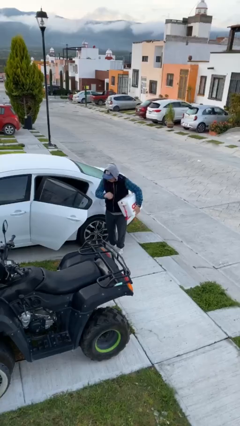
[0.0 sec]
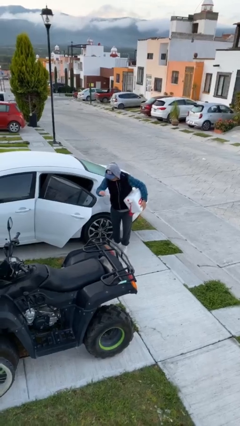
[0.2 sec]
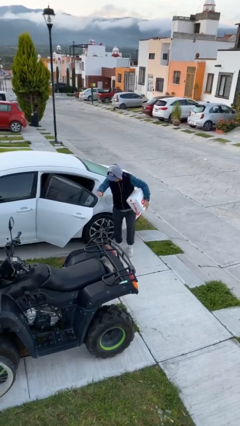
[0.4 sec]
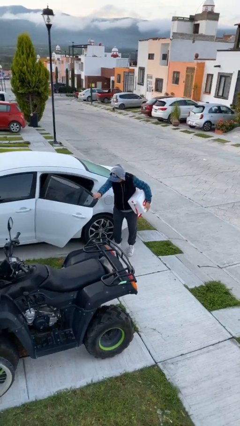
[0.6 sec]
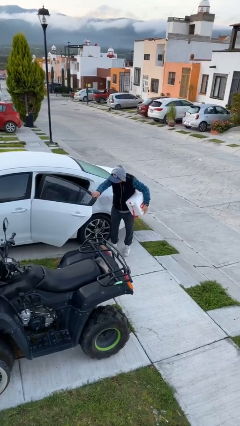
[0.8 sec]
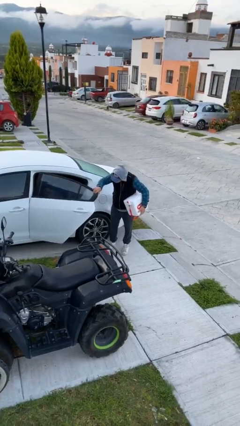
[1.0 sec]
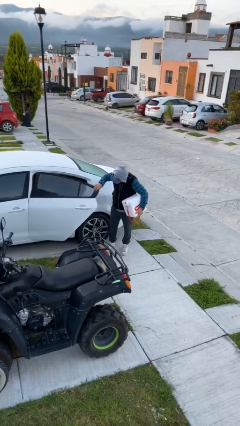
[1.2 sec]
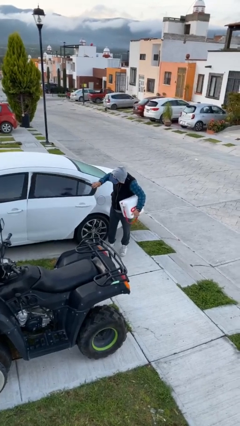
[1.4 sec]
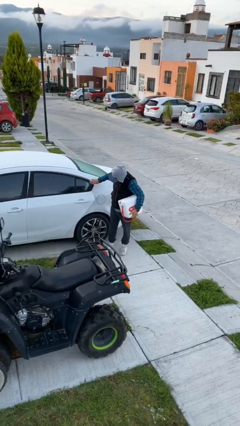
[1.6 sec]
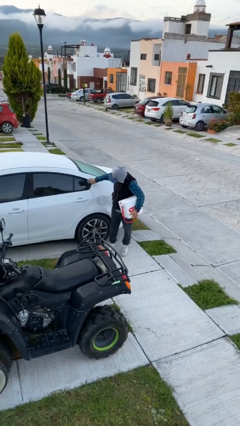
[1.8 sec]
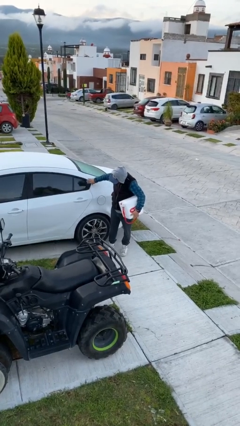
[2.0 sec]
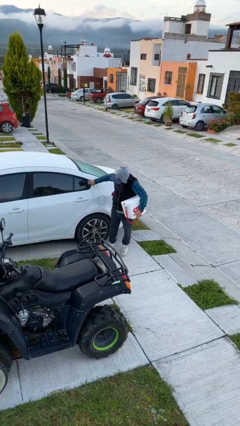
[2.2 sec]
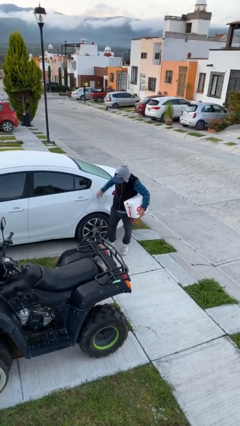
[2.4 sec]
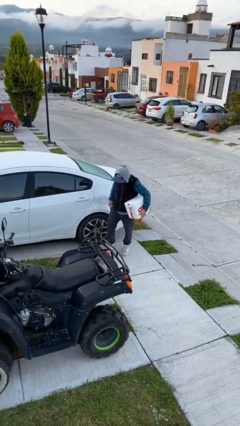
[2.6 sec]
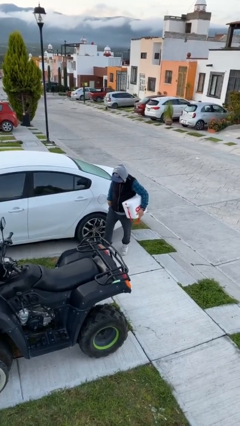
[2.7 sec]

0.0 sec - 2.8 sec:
person closes car door

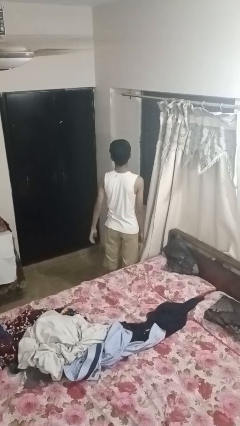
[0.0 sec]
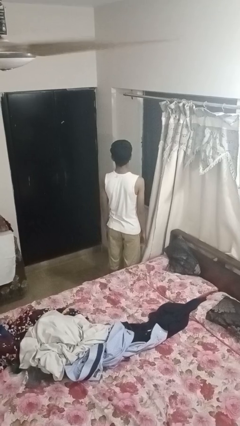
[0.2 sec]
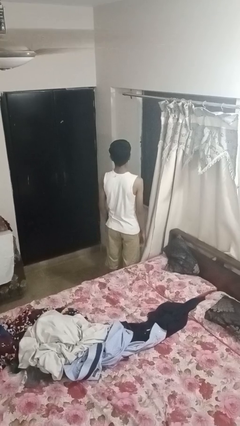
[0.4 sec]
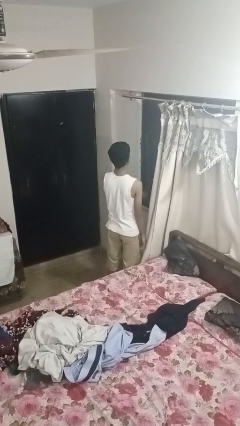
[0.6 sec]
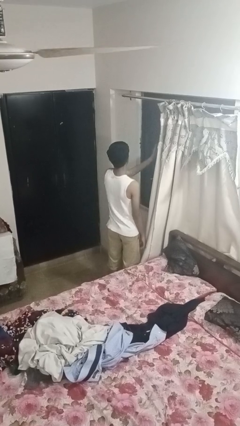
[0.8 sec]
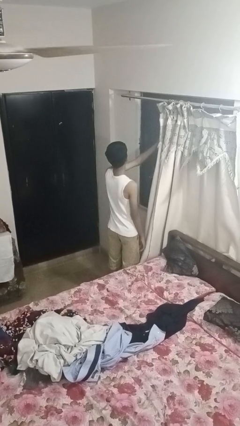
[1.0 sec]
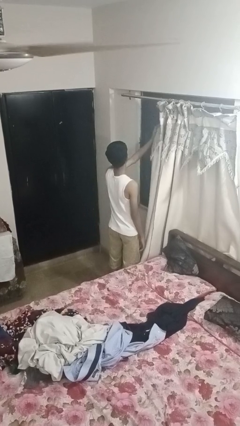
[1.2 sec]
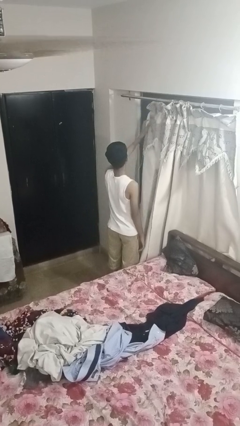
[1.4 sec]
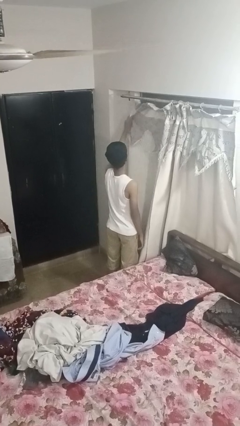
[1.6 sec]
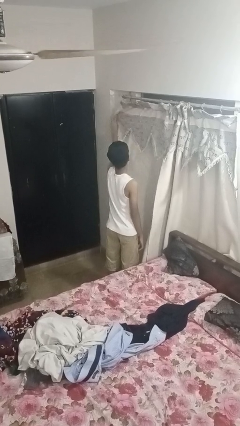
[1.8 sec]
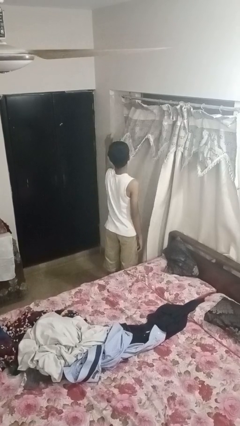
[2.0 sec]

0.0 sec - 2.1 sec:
person closes curtains

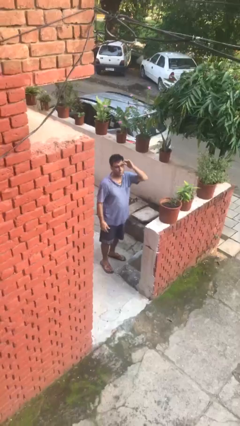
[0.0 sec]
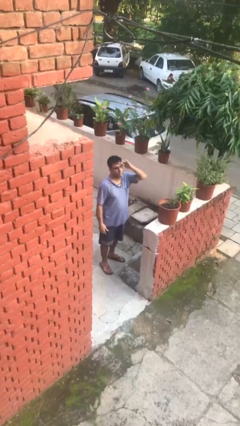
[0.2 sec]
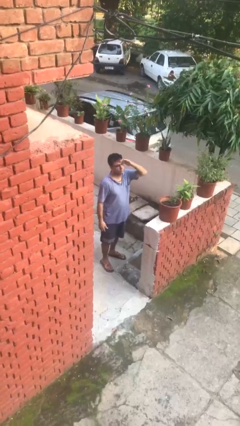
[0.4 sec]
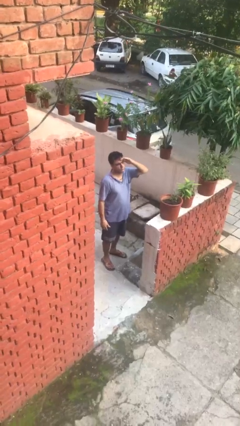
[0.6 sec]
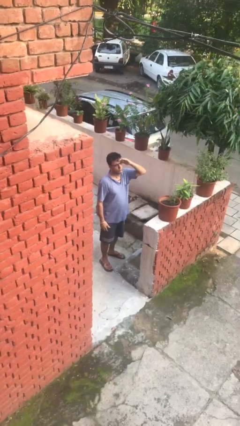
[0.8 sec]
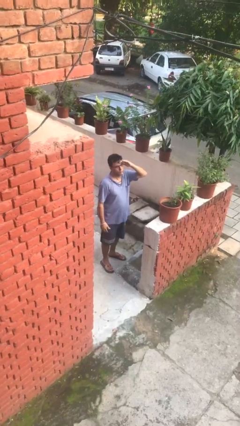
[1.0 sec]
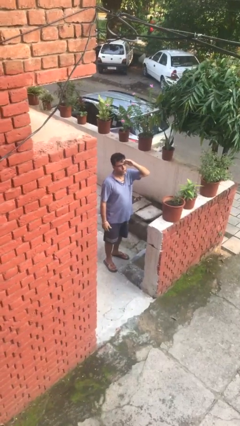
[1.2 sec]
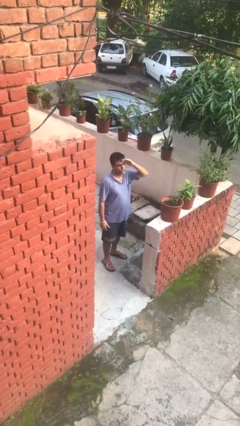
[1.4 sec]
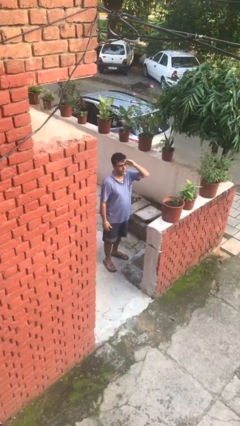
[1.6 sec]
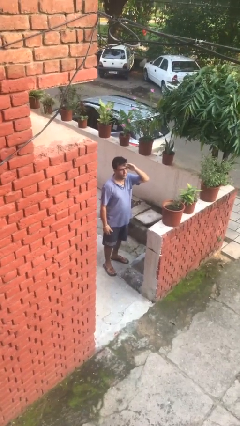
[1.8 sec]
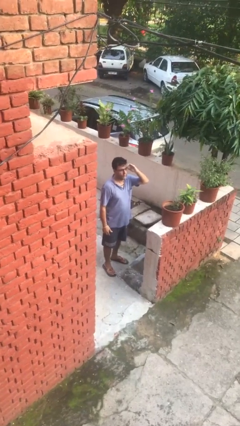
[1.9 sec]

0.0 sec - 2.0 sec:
person shades eyes

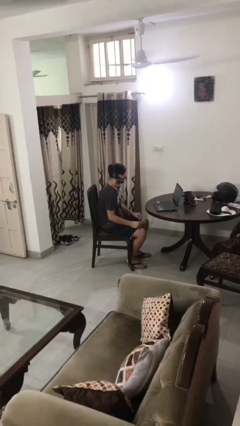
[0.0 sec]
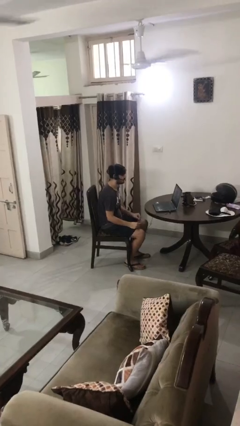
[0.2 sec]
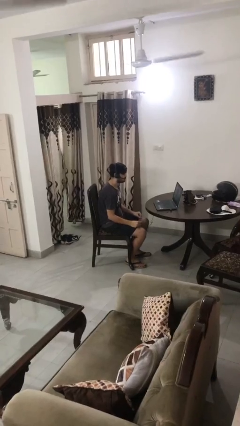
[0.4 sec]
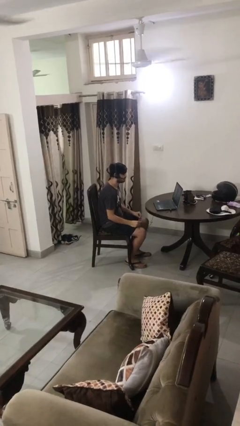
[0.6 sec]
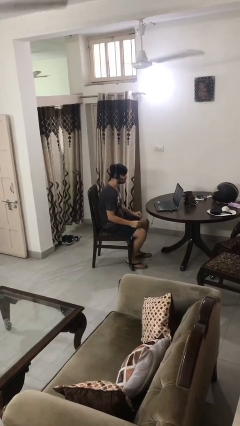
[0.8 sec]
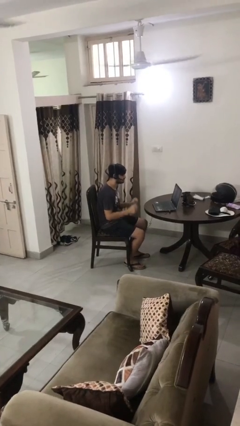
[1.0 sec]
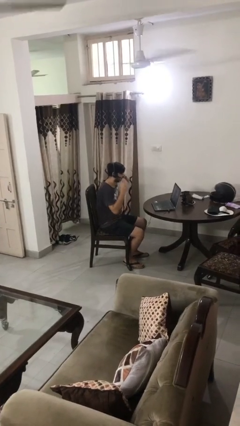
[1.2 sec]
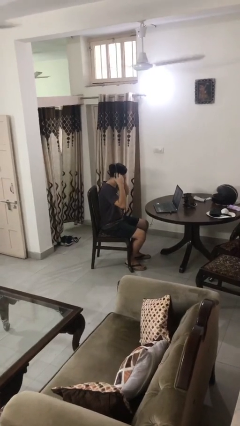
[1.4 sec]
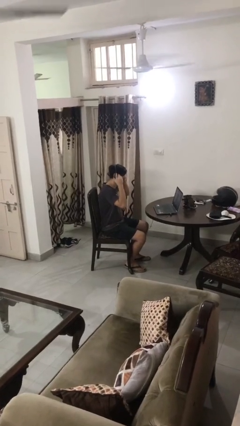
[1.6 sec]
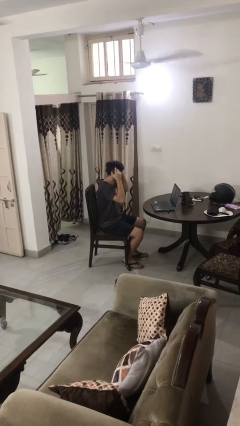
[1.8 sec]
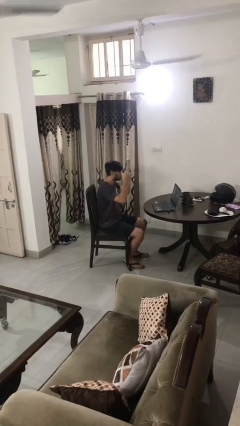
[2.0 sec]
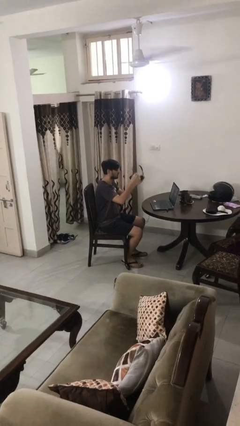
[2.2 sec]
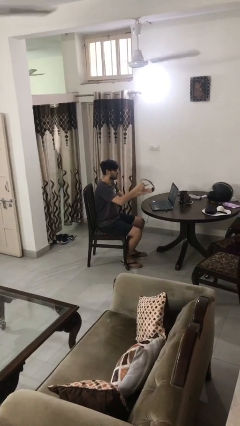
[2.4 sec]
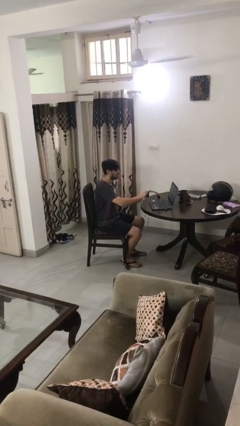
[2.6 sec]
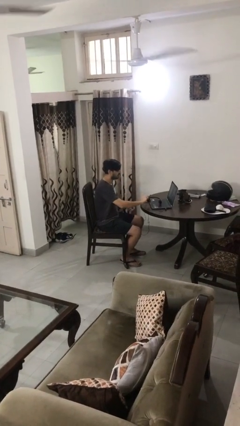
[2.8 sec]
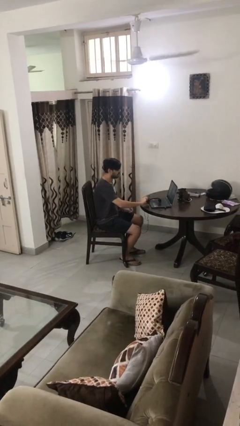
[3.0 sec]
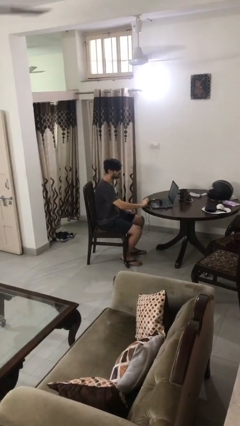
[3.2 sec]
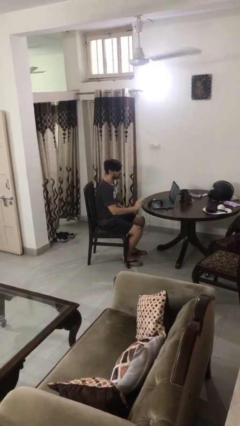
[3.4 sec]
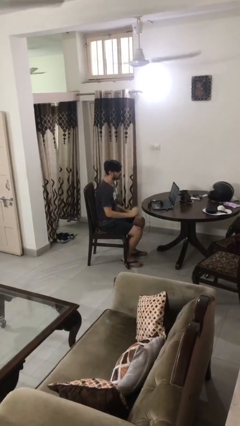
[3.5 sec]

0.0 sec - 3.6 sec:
person takes off headphones

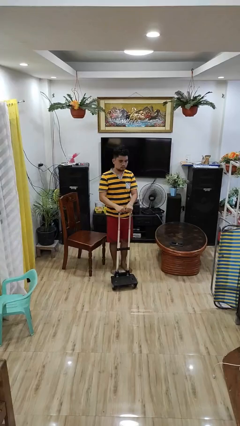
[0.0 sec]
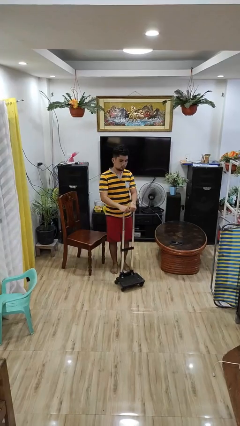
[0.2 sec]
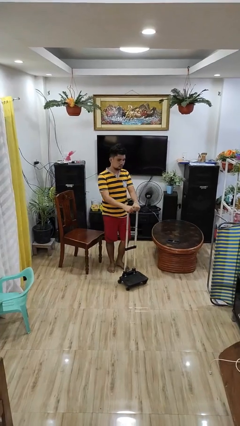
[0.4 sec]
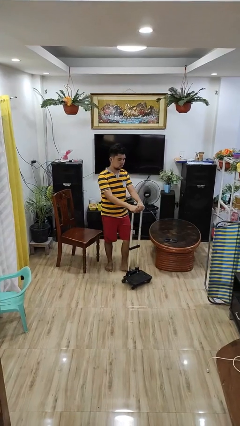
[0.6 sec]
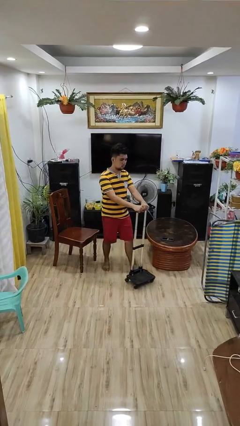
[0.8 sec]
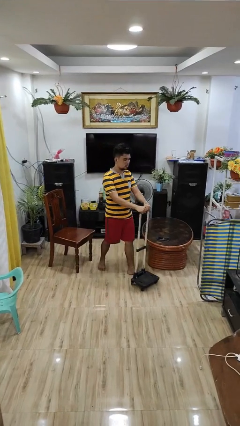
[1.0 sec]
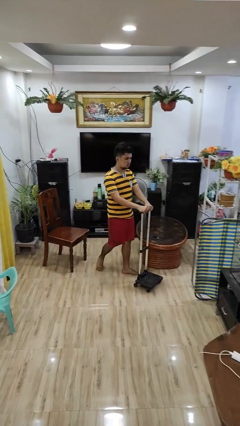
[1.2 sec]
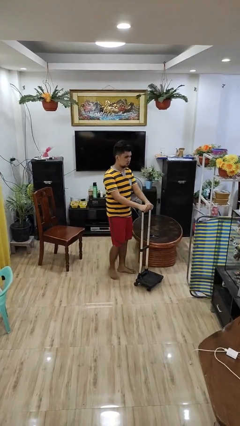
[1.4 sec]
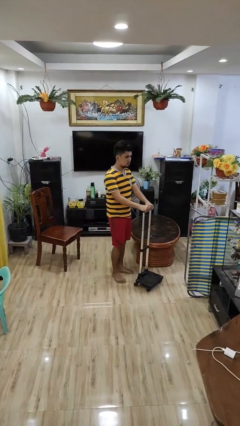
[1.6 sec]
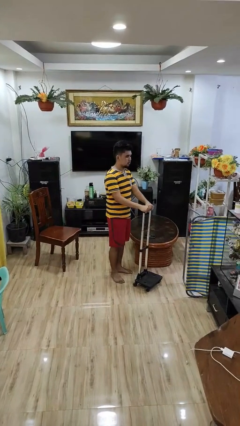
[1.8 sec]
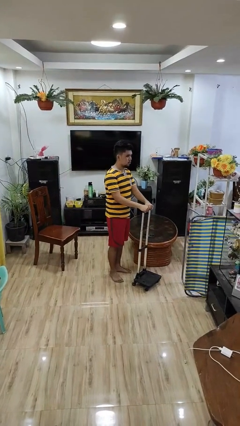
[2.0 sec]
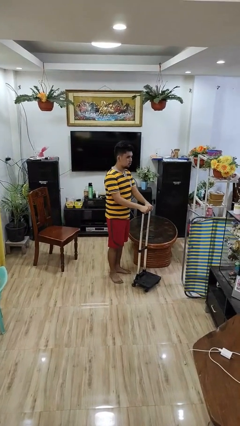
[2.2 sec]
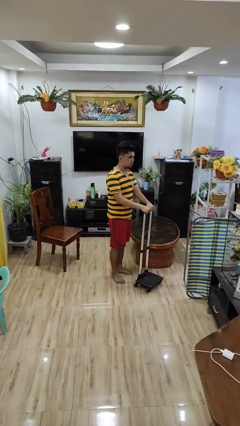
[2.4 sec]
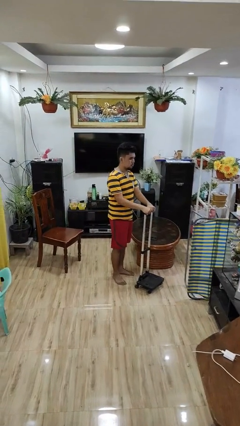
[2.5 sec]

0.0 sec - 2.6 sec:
person pushes wheeled cart

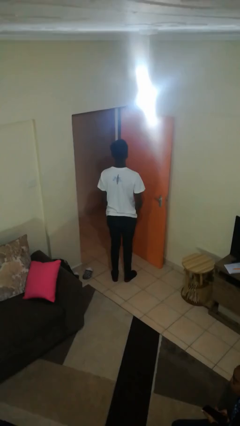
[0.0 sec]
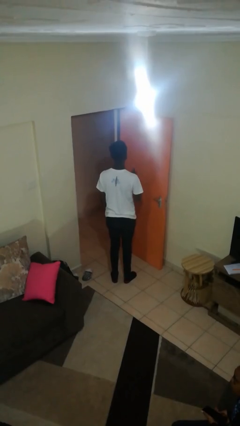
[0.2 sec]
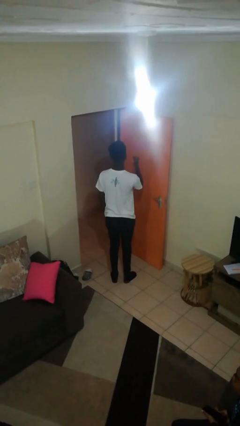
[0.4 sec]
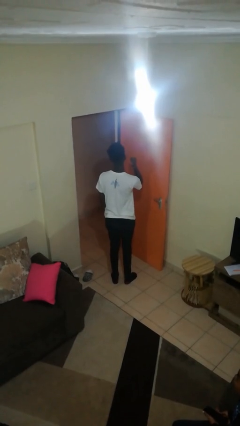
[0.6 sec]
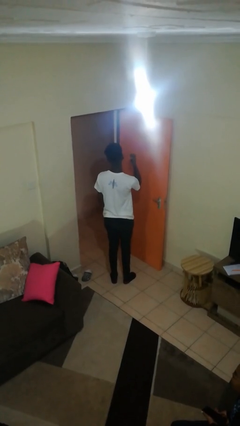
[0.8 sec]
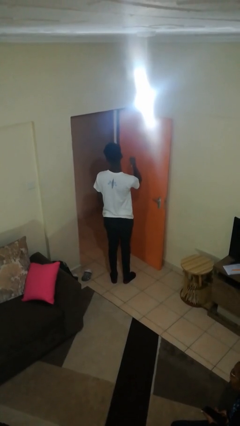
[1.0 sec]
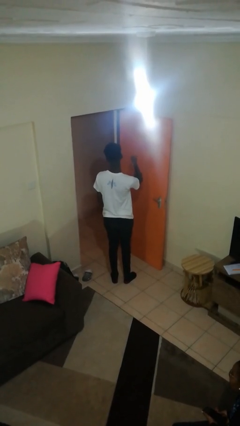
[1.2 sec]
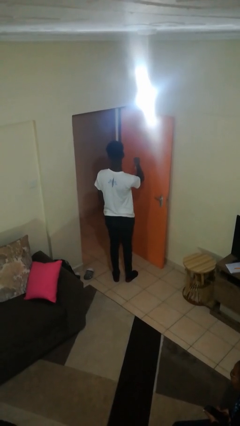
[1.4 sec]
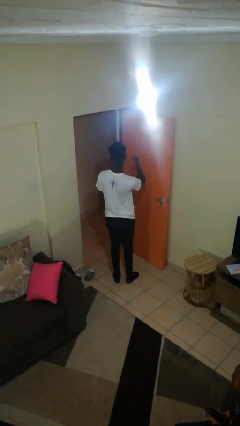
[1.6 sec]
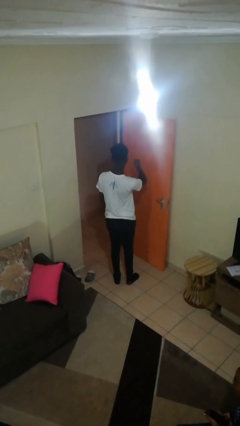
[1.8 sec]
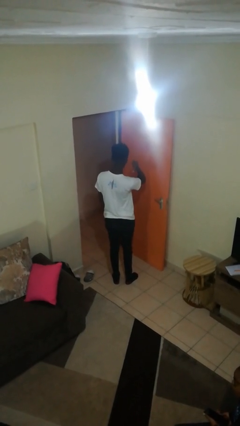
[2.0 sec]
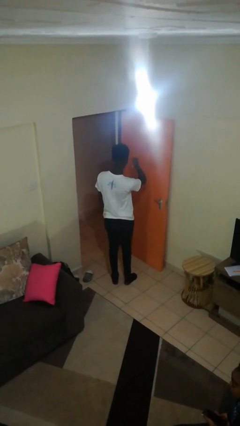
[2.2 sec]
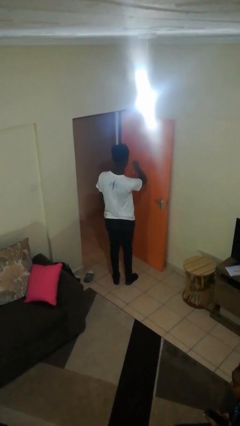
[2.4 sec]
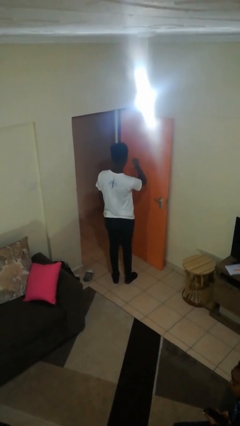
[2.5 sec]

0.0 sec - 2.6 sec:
person gestures behind me

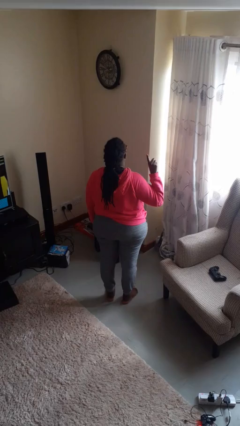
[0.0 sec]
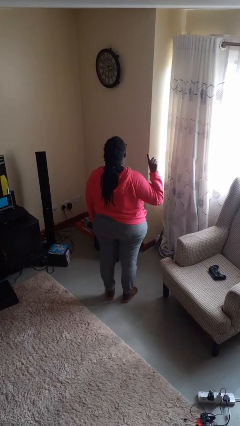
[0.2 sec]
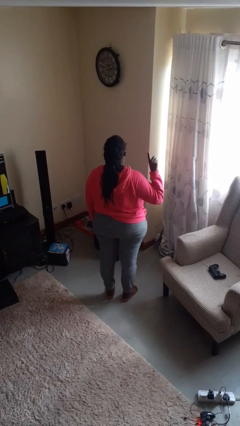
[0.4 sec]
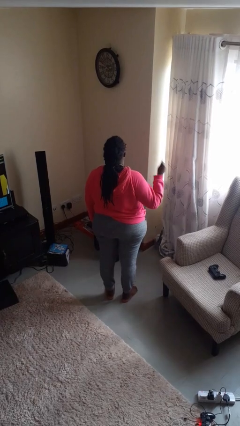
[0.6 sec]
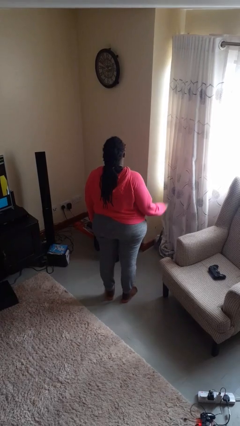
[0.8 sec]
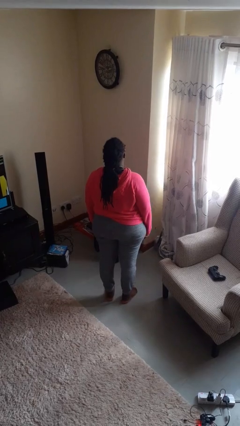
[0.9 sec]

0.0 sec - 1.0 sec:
person gestures number one

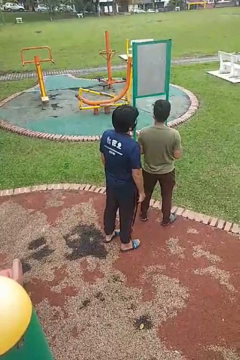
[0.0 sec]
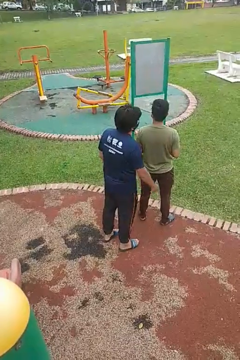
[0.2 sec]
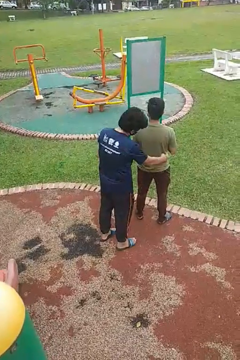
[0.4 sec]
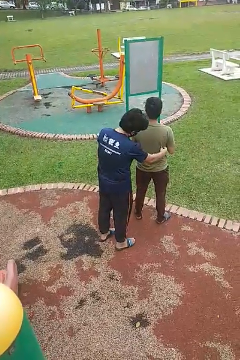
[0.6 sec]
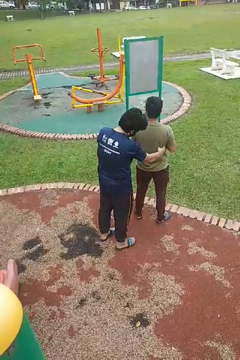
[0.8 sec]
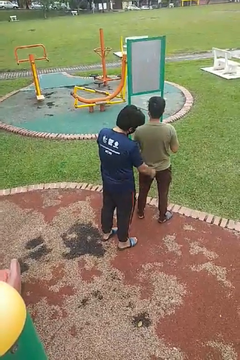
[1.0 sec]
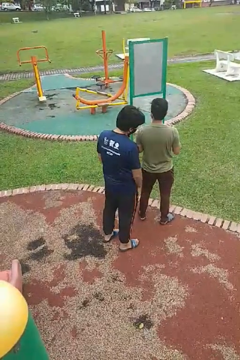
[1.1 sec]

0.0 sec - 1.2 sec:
person tickles person
